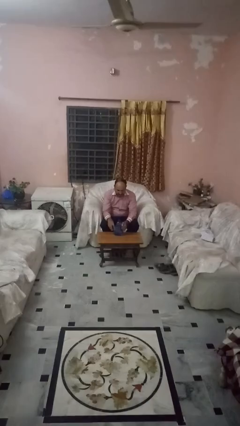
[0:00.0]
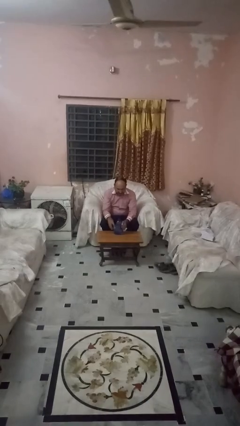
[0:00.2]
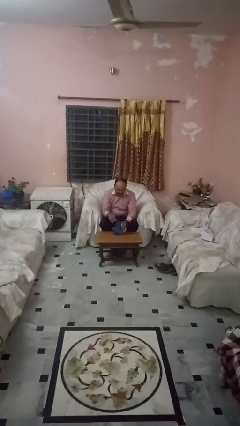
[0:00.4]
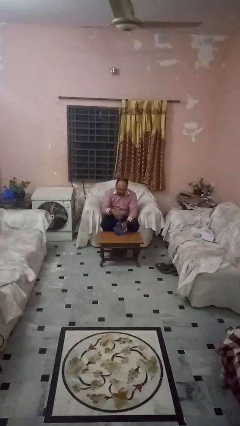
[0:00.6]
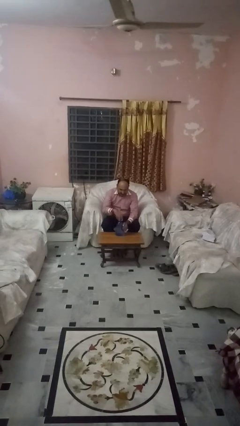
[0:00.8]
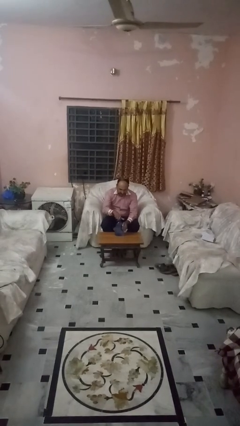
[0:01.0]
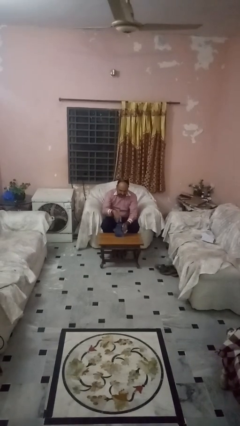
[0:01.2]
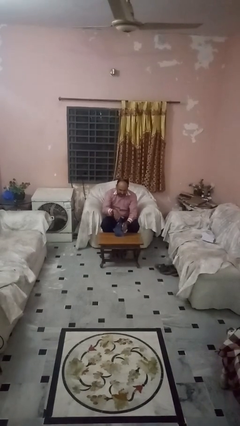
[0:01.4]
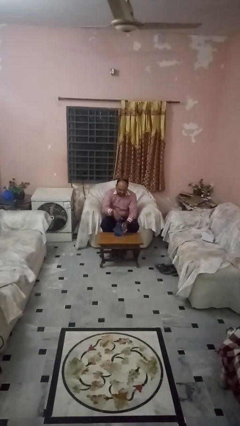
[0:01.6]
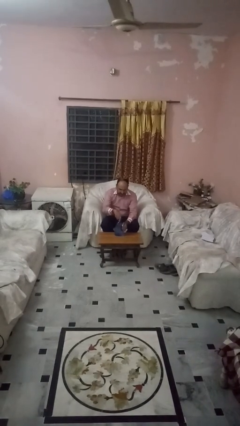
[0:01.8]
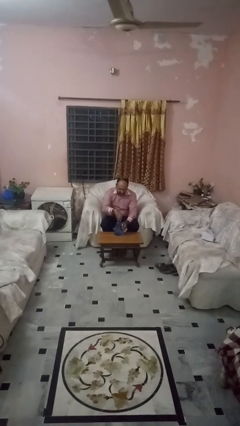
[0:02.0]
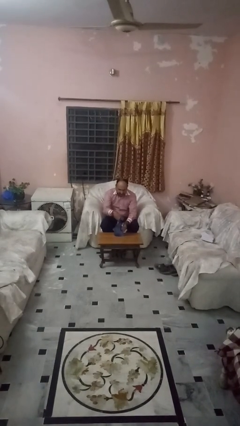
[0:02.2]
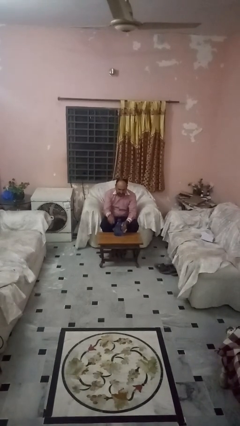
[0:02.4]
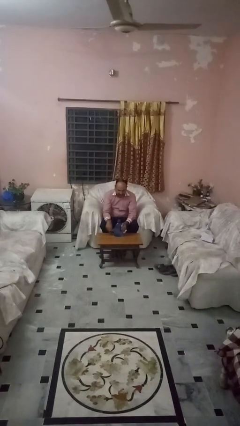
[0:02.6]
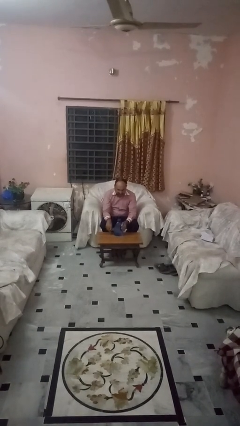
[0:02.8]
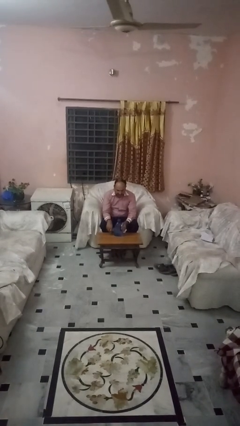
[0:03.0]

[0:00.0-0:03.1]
person screws lid to bottle

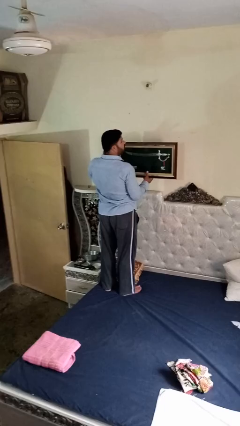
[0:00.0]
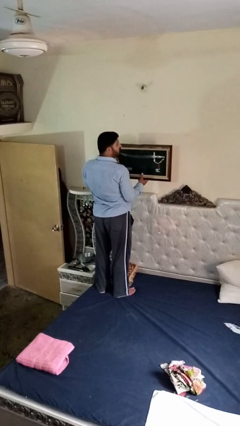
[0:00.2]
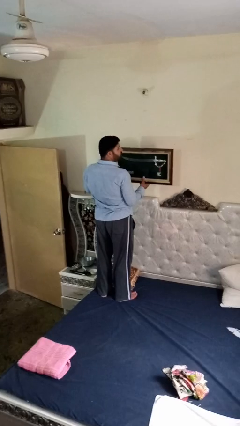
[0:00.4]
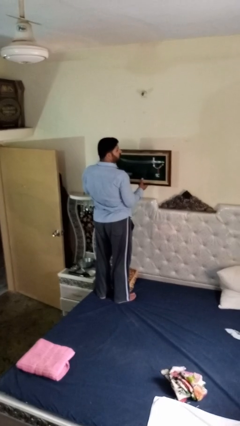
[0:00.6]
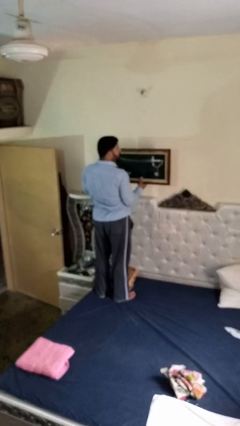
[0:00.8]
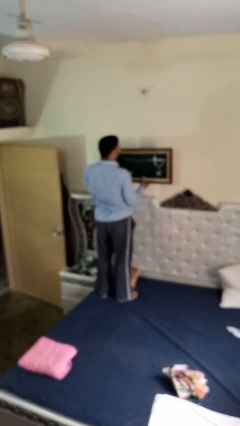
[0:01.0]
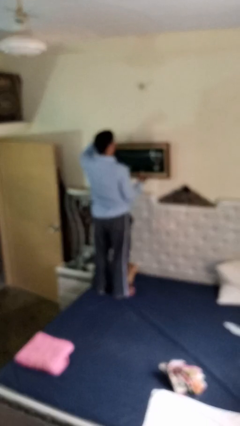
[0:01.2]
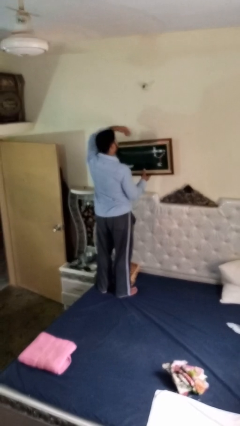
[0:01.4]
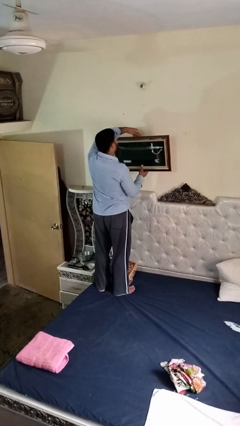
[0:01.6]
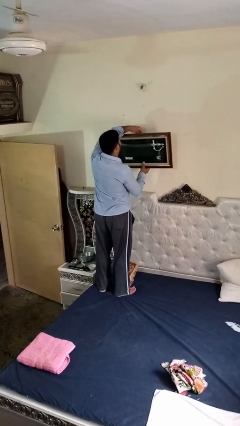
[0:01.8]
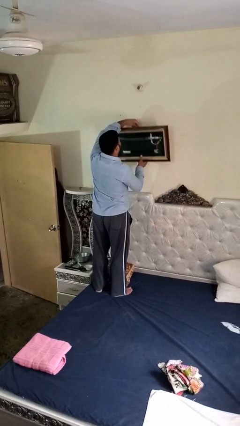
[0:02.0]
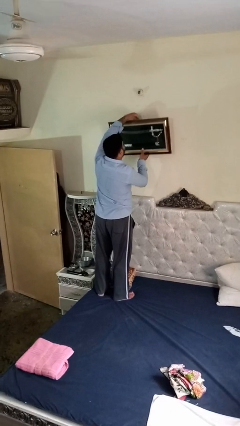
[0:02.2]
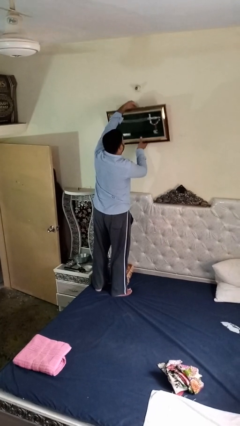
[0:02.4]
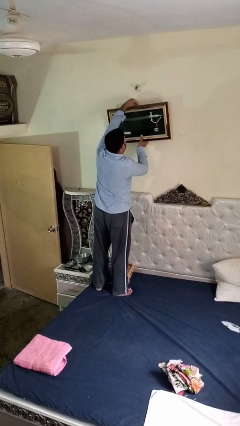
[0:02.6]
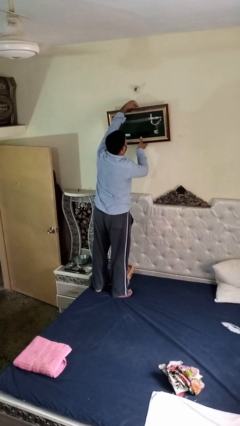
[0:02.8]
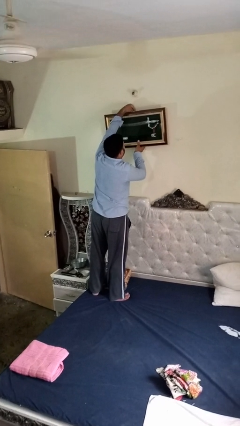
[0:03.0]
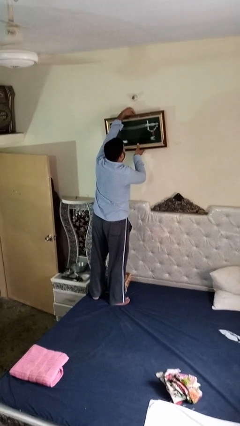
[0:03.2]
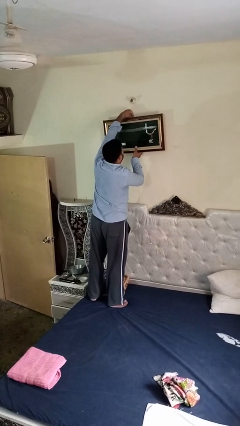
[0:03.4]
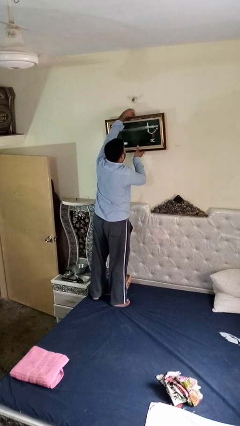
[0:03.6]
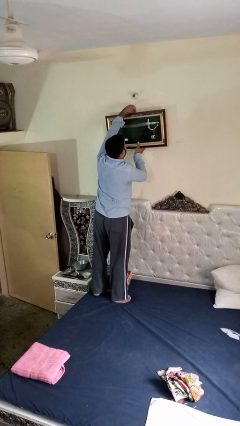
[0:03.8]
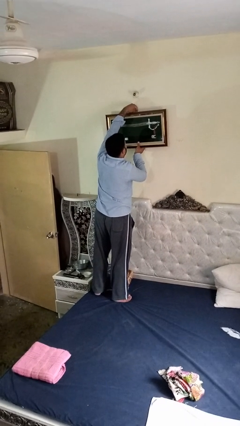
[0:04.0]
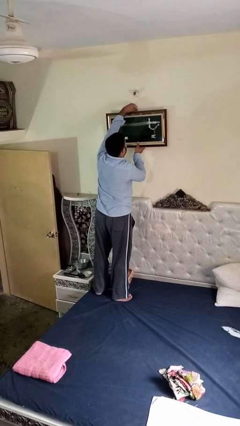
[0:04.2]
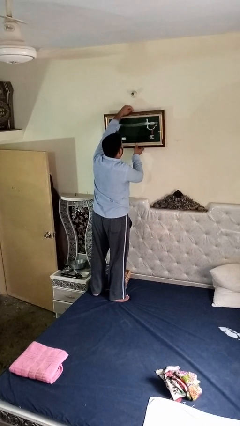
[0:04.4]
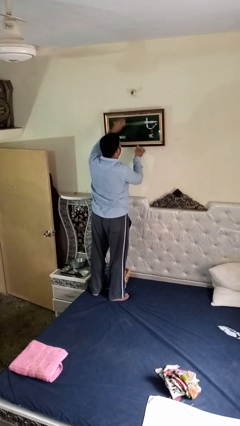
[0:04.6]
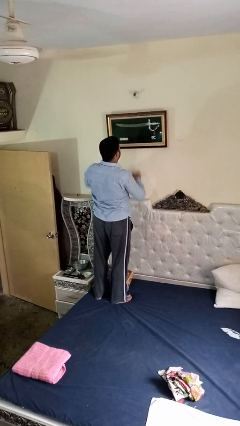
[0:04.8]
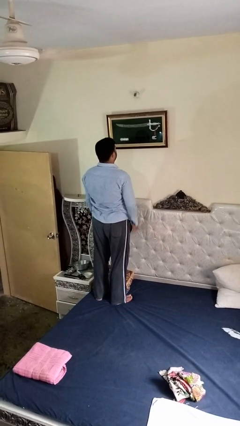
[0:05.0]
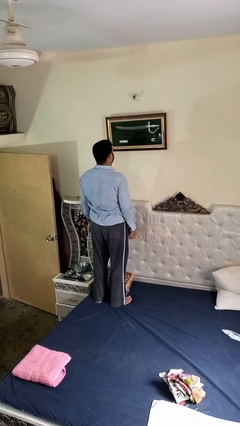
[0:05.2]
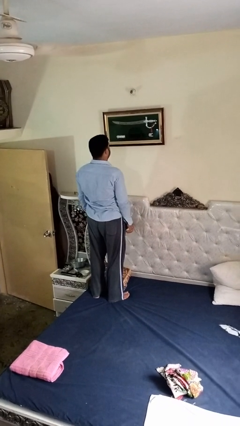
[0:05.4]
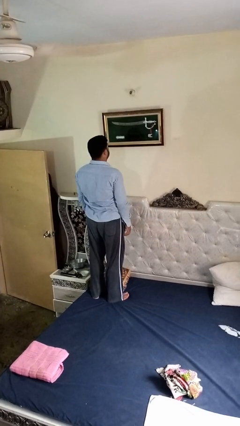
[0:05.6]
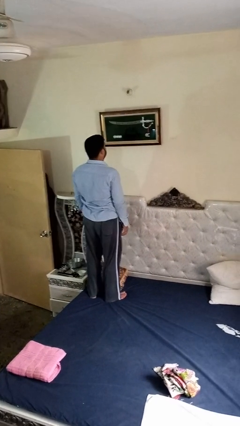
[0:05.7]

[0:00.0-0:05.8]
person puts up picture frame

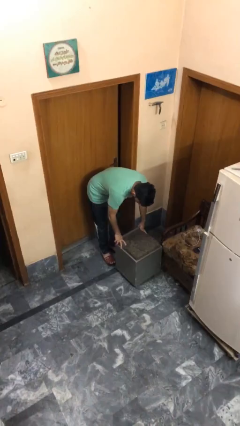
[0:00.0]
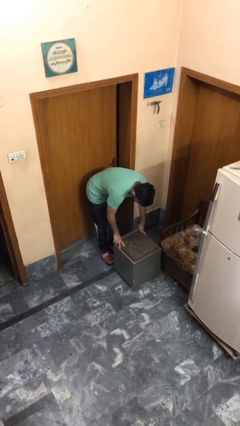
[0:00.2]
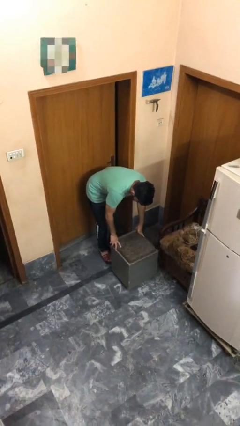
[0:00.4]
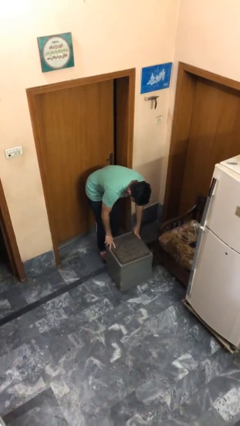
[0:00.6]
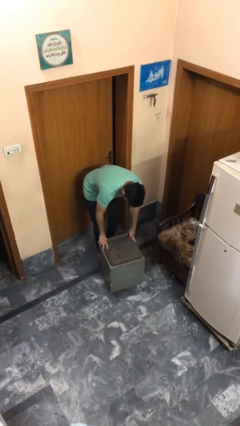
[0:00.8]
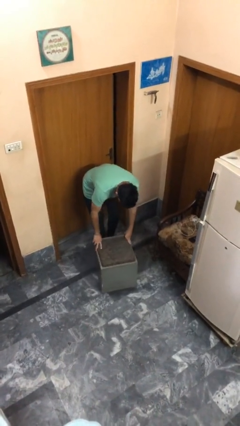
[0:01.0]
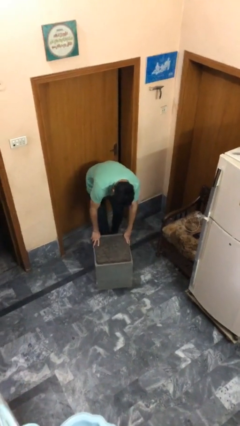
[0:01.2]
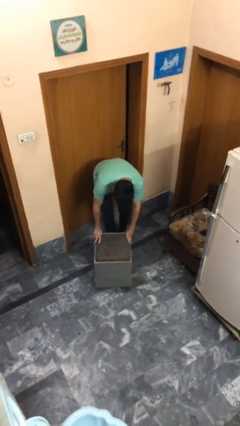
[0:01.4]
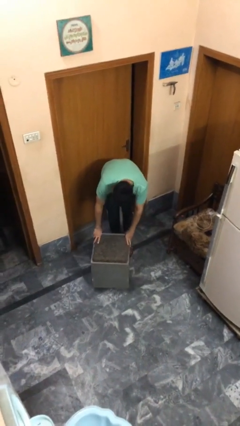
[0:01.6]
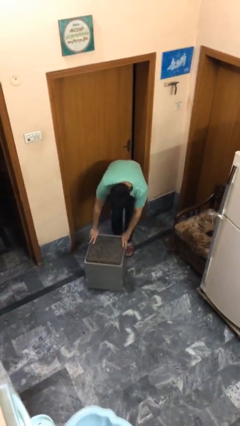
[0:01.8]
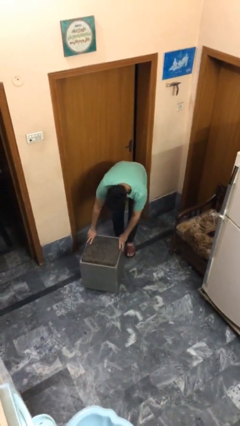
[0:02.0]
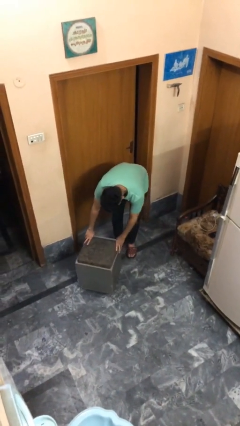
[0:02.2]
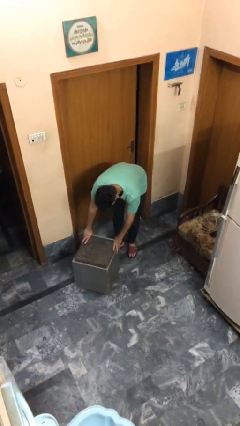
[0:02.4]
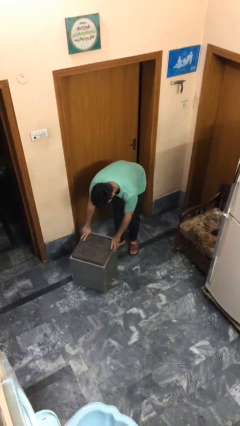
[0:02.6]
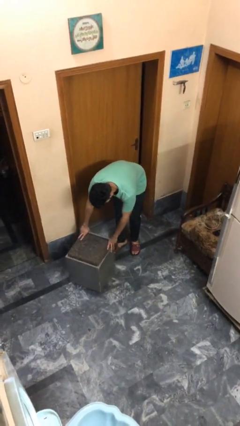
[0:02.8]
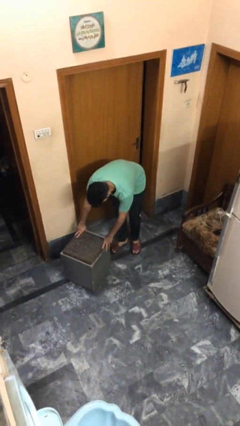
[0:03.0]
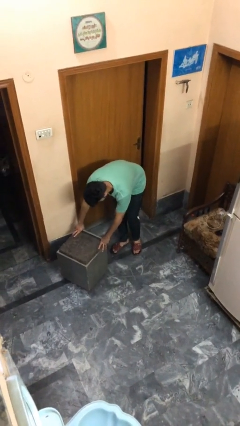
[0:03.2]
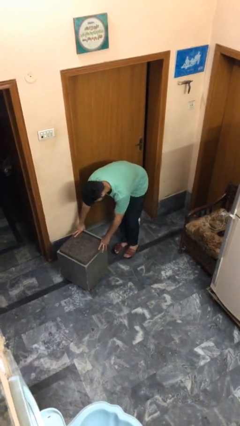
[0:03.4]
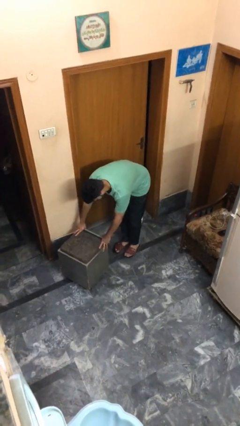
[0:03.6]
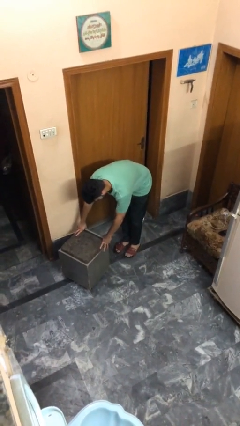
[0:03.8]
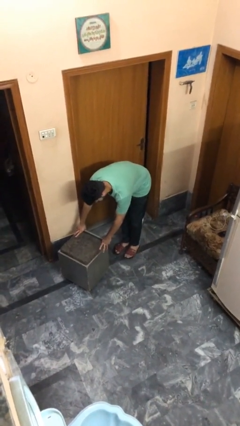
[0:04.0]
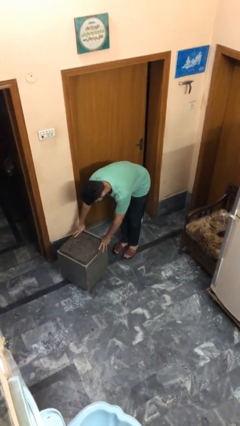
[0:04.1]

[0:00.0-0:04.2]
person pushes wheeled cart

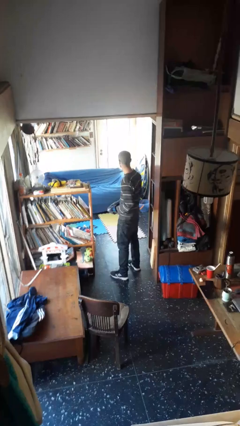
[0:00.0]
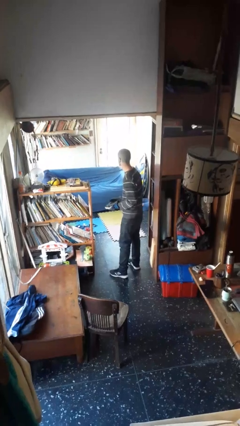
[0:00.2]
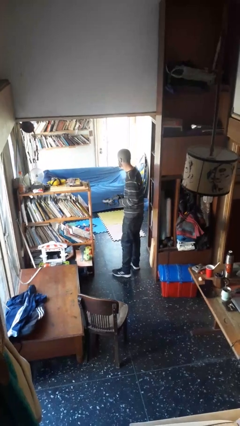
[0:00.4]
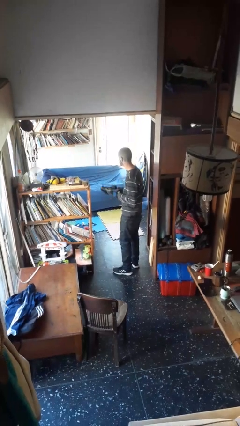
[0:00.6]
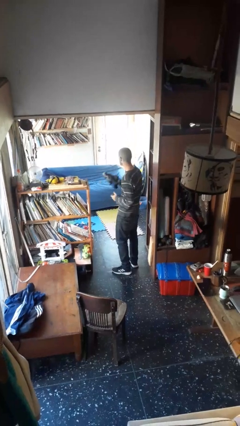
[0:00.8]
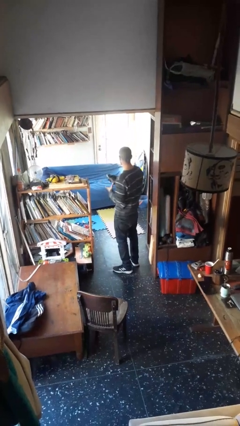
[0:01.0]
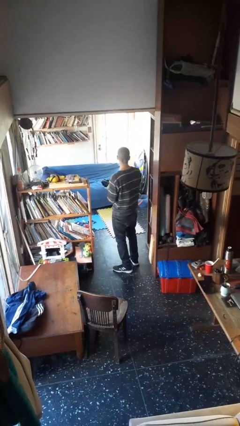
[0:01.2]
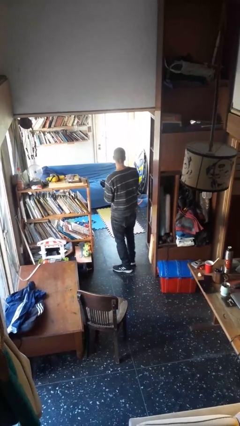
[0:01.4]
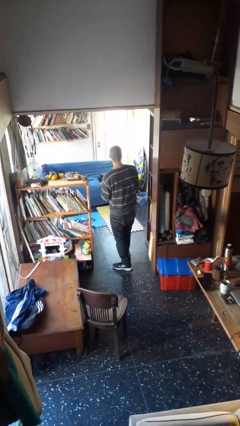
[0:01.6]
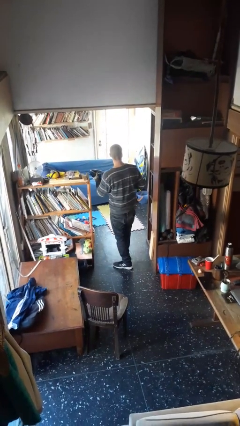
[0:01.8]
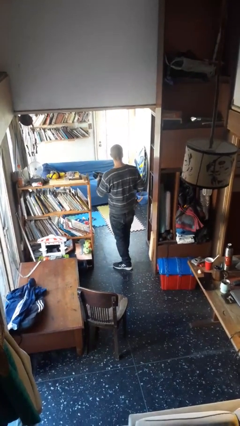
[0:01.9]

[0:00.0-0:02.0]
person takes off gloves

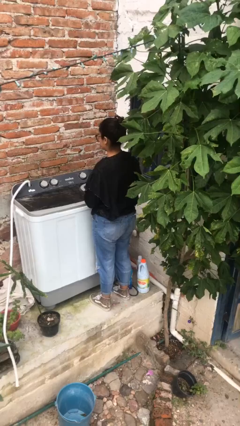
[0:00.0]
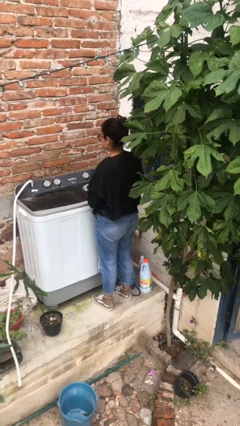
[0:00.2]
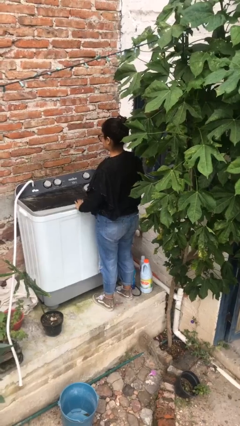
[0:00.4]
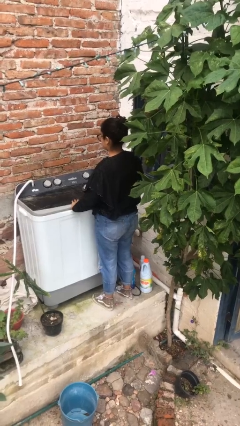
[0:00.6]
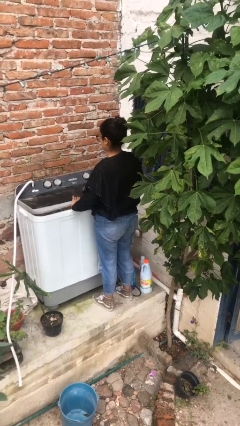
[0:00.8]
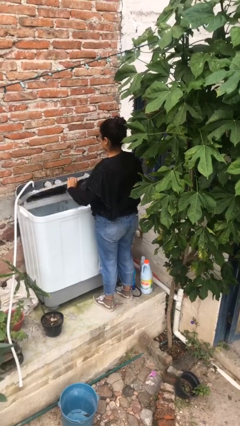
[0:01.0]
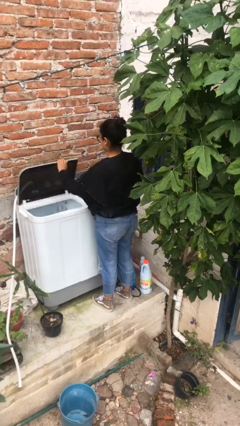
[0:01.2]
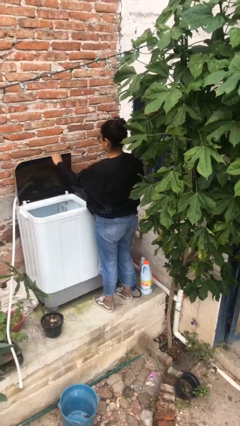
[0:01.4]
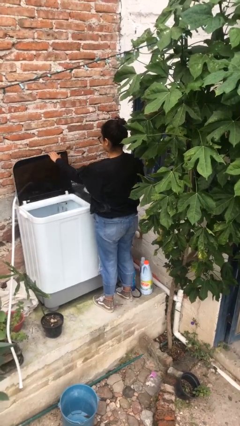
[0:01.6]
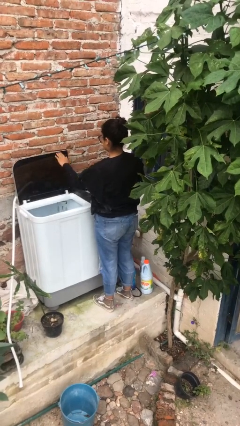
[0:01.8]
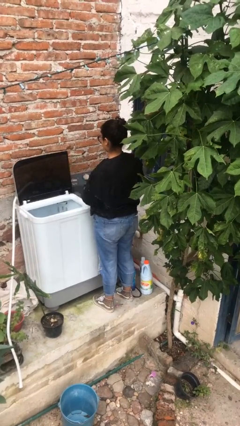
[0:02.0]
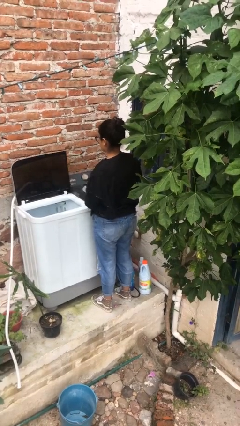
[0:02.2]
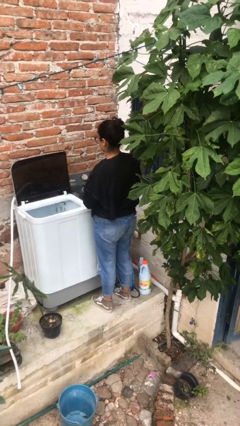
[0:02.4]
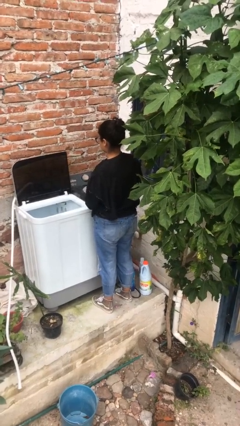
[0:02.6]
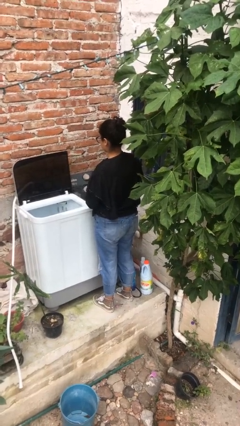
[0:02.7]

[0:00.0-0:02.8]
person opens clothes washer

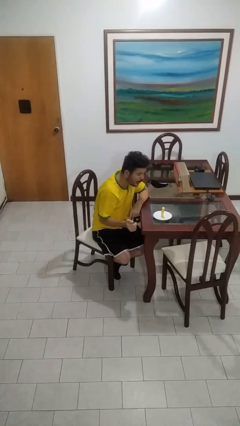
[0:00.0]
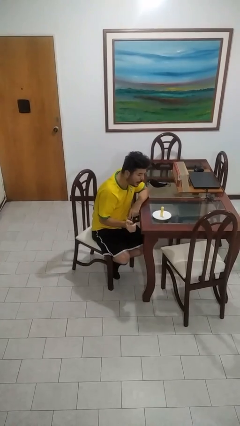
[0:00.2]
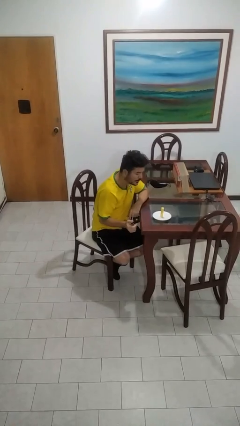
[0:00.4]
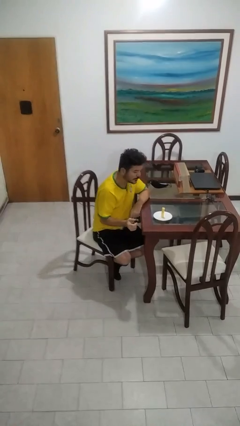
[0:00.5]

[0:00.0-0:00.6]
person extinguishes candle
